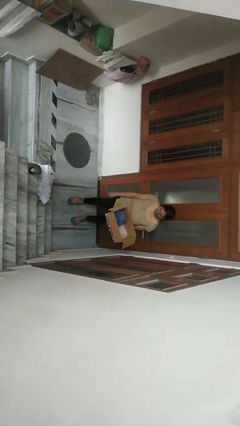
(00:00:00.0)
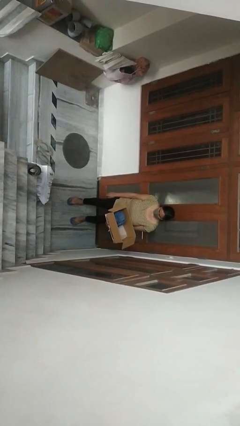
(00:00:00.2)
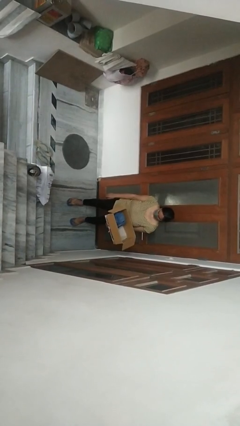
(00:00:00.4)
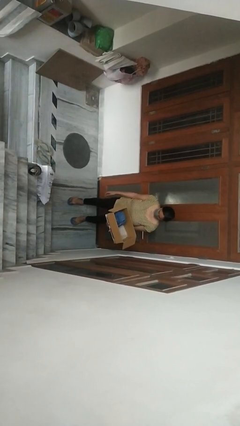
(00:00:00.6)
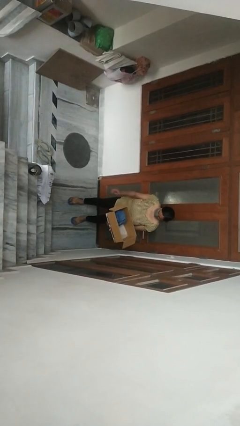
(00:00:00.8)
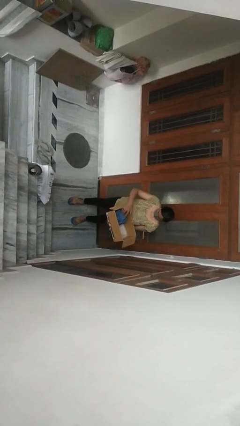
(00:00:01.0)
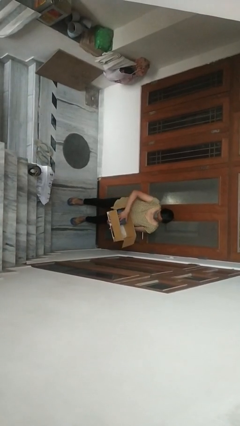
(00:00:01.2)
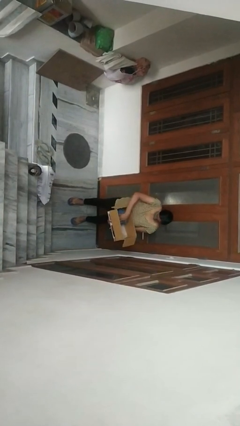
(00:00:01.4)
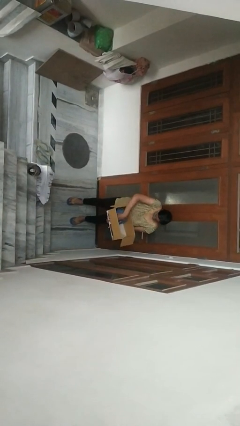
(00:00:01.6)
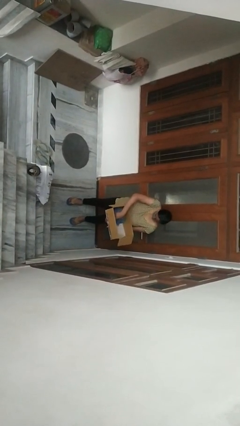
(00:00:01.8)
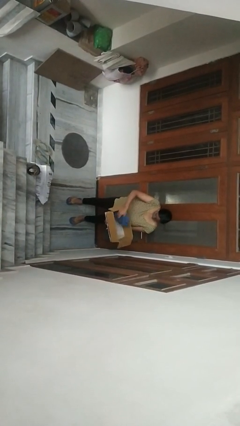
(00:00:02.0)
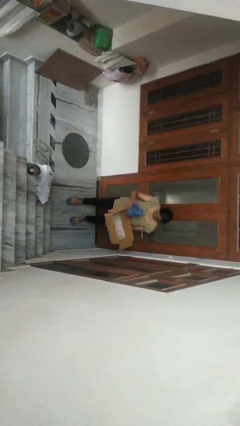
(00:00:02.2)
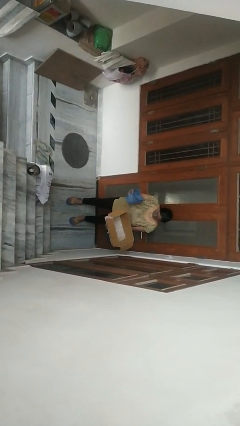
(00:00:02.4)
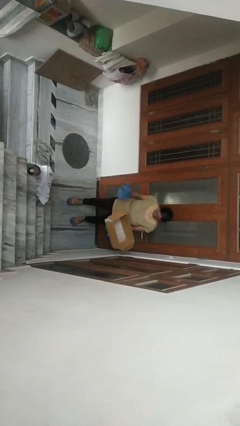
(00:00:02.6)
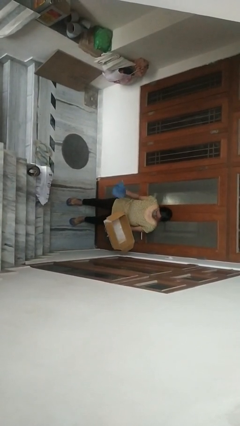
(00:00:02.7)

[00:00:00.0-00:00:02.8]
person takes object from box

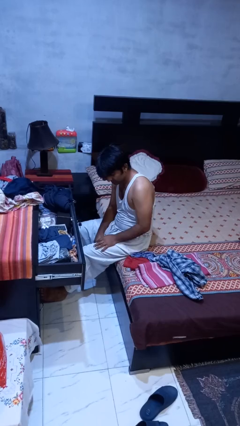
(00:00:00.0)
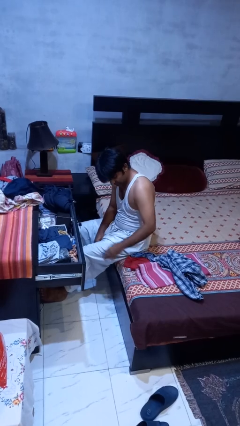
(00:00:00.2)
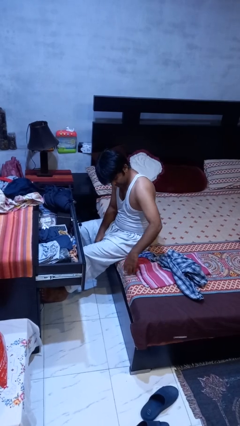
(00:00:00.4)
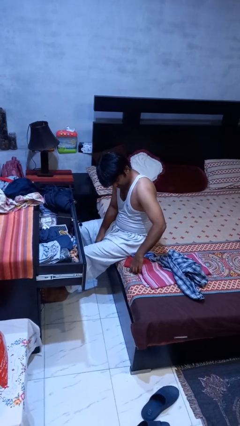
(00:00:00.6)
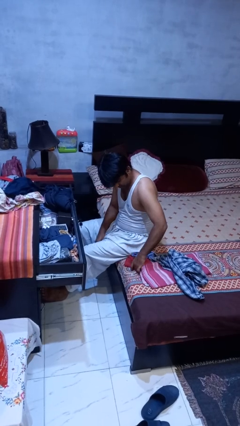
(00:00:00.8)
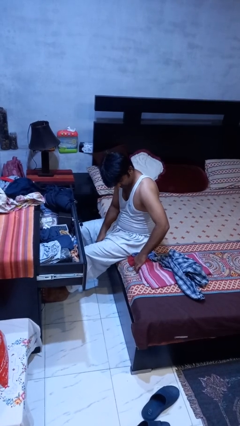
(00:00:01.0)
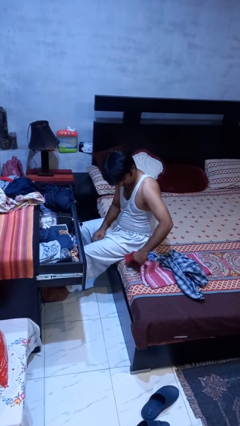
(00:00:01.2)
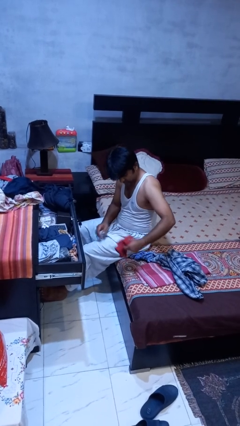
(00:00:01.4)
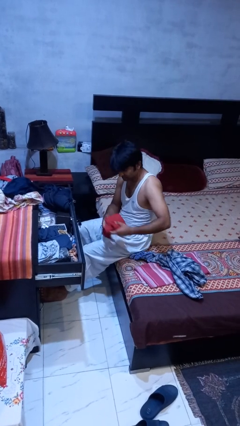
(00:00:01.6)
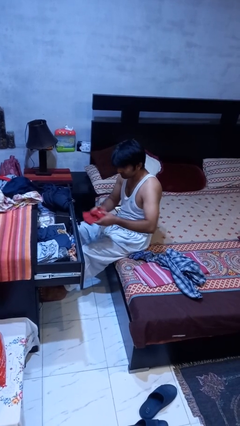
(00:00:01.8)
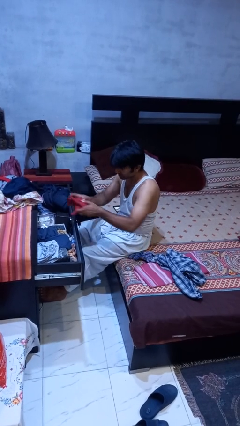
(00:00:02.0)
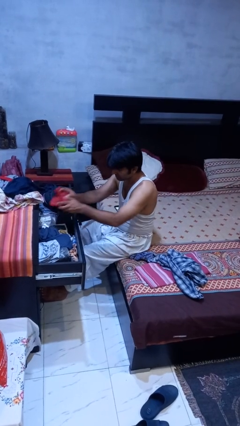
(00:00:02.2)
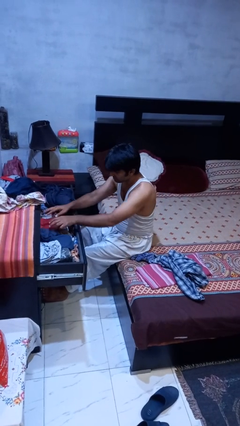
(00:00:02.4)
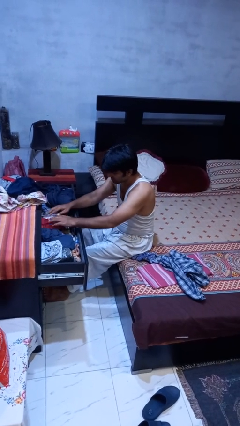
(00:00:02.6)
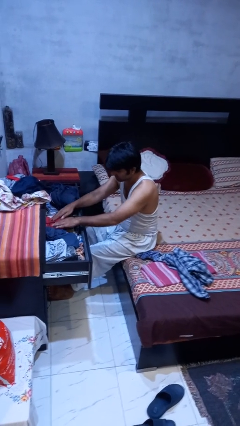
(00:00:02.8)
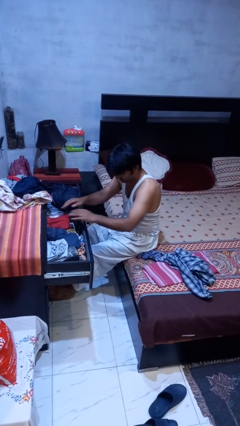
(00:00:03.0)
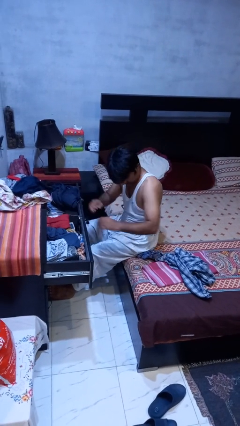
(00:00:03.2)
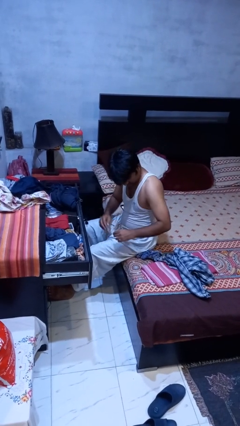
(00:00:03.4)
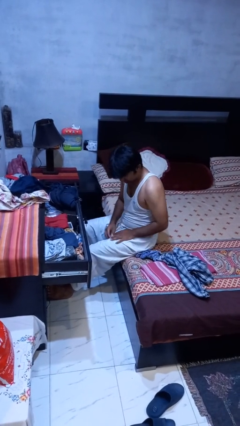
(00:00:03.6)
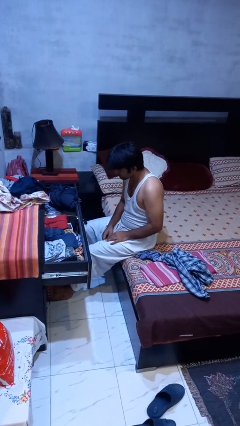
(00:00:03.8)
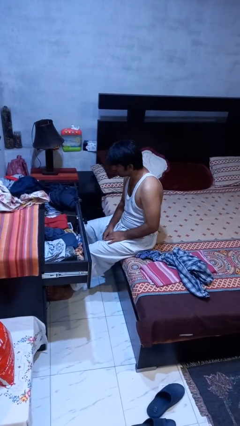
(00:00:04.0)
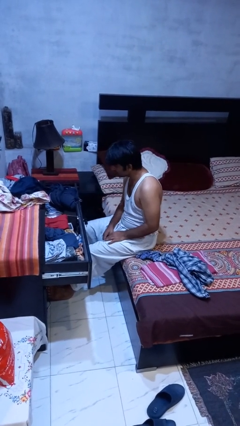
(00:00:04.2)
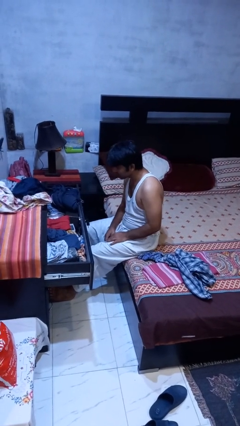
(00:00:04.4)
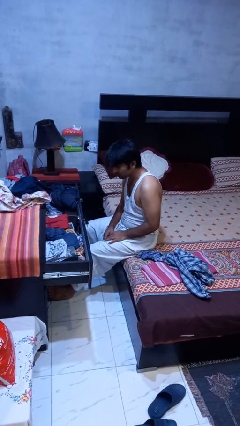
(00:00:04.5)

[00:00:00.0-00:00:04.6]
person puts clothes into dresser

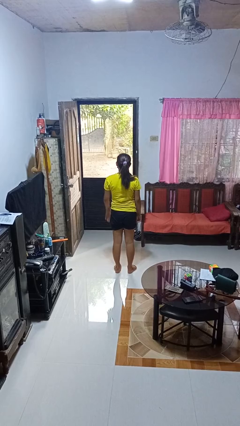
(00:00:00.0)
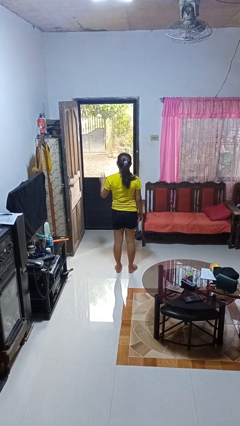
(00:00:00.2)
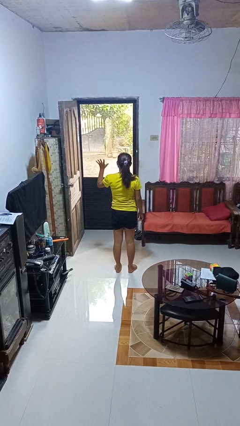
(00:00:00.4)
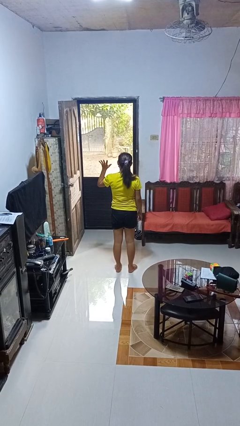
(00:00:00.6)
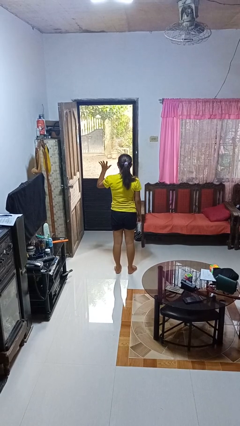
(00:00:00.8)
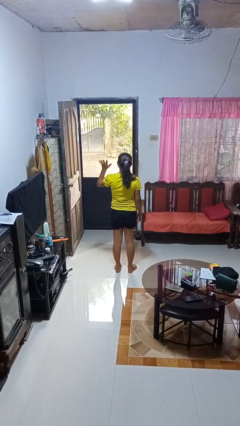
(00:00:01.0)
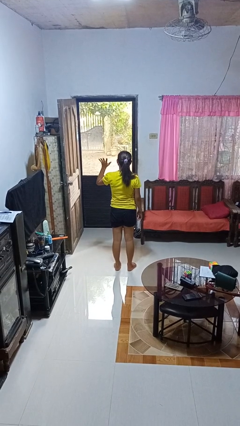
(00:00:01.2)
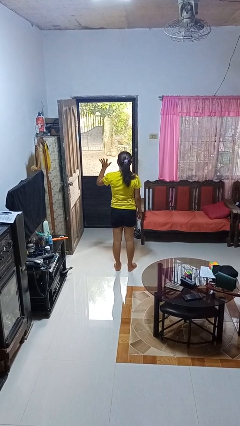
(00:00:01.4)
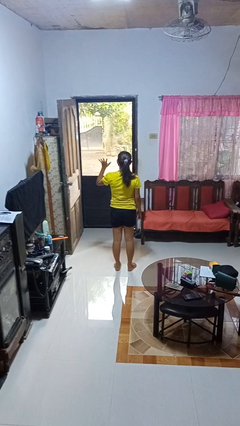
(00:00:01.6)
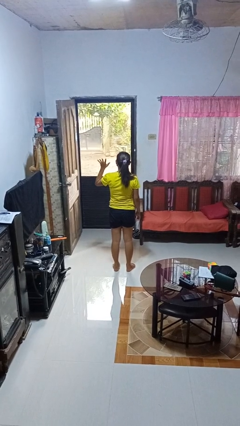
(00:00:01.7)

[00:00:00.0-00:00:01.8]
person gestures number five

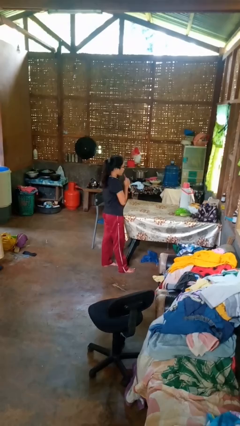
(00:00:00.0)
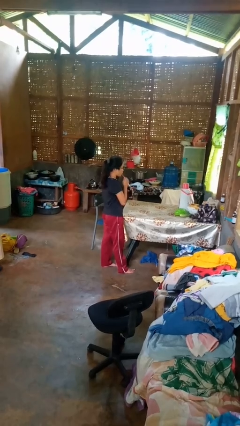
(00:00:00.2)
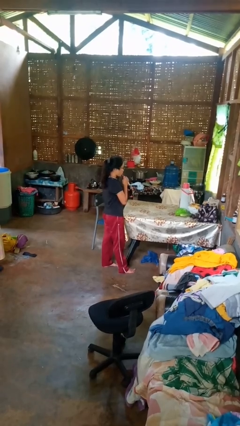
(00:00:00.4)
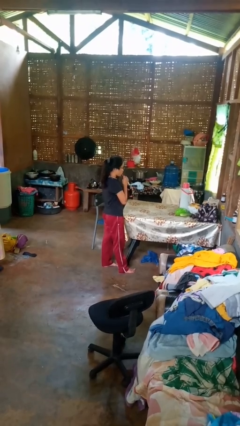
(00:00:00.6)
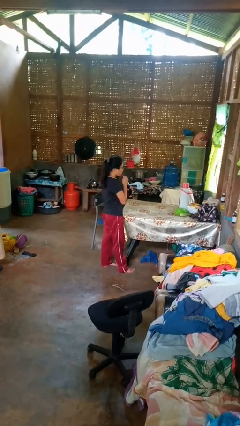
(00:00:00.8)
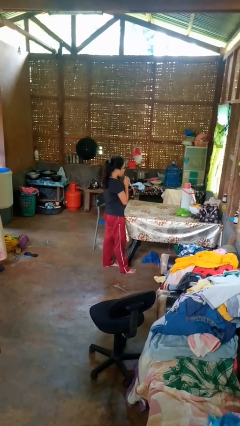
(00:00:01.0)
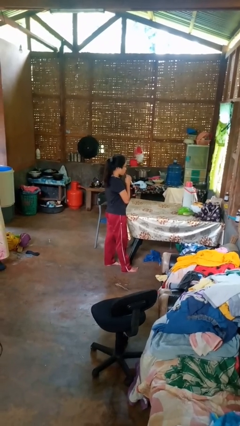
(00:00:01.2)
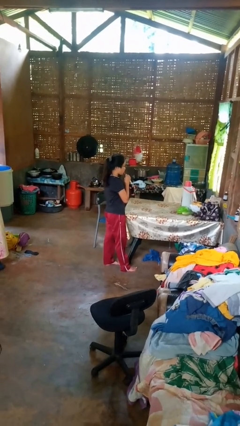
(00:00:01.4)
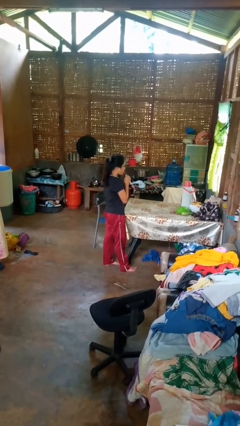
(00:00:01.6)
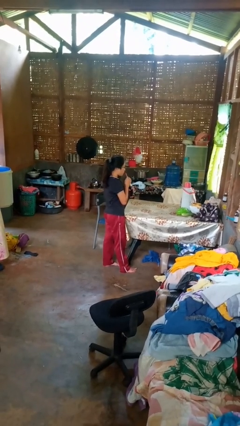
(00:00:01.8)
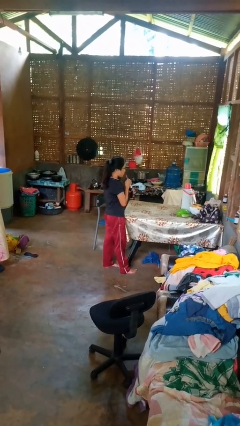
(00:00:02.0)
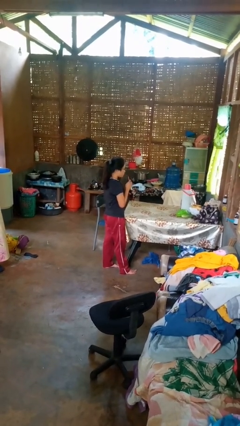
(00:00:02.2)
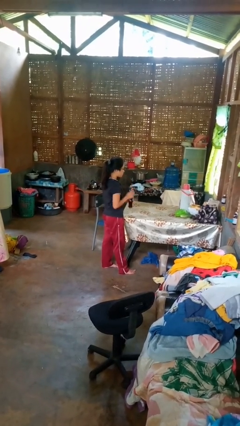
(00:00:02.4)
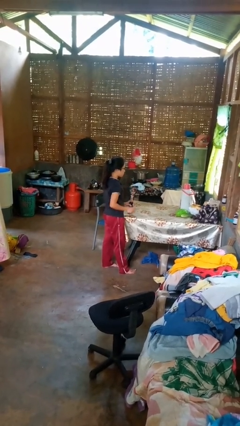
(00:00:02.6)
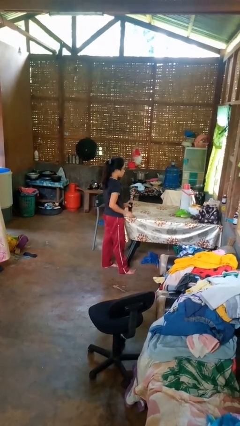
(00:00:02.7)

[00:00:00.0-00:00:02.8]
person drinks from straw

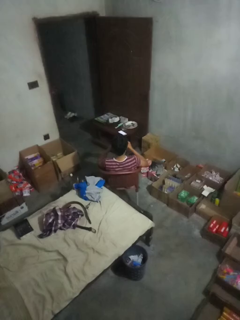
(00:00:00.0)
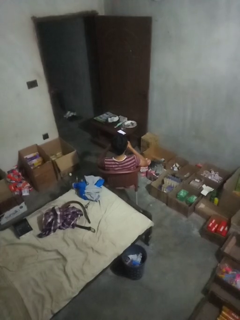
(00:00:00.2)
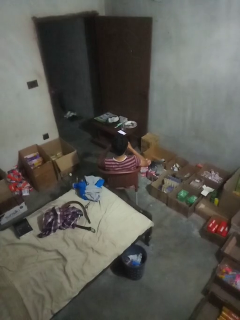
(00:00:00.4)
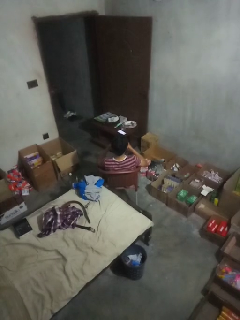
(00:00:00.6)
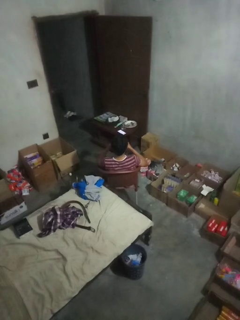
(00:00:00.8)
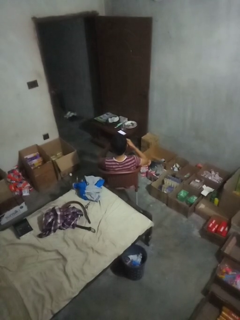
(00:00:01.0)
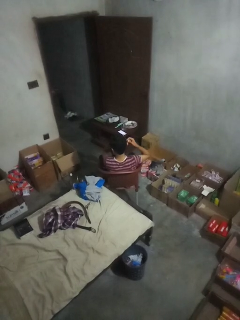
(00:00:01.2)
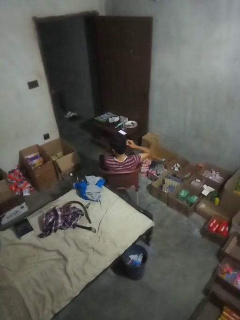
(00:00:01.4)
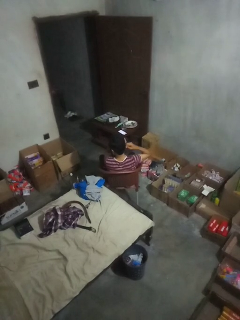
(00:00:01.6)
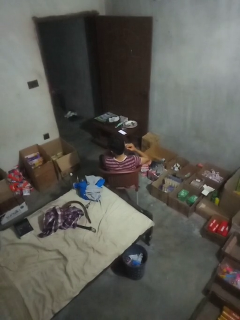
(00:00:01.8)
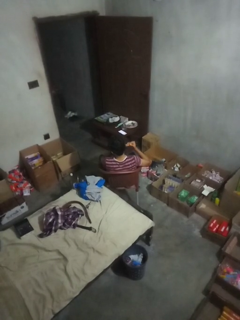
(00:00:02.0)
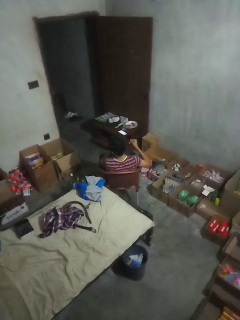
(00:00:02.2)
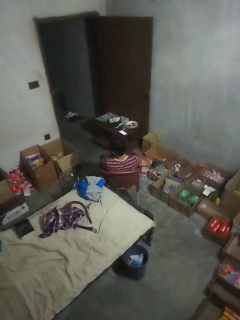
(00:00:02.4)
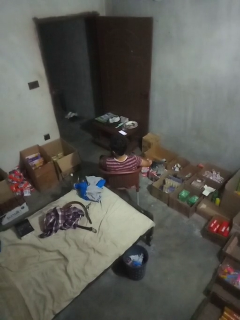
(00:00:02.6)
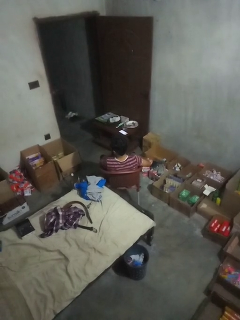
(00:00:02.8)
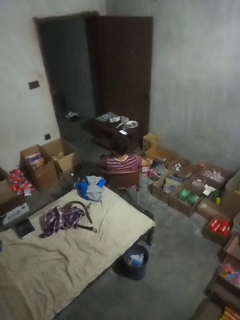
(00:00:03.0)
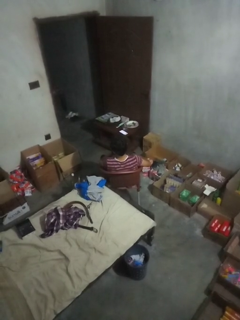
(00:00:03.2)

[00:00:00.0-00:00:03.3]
person puts on earrings

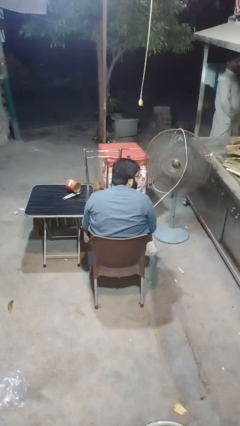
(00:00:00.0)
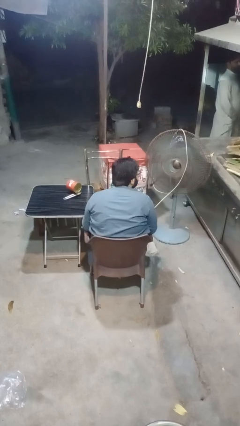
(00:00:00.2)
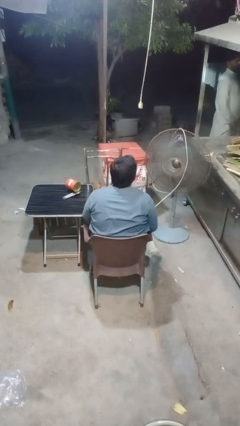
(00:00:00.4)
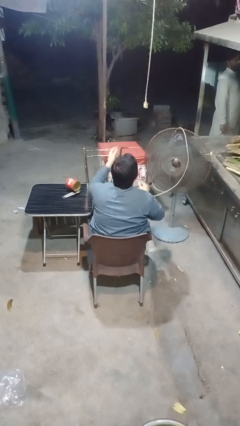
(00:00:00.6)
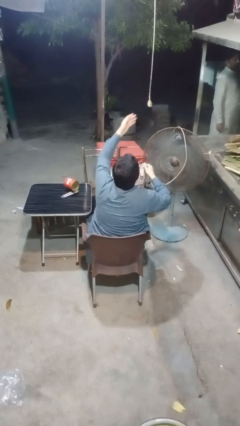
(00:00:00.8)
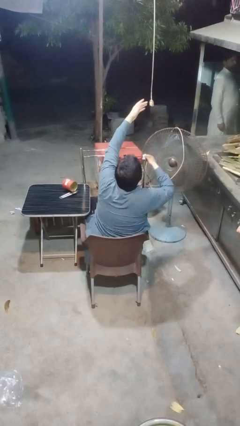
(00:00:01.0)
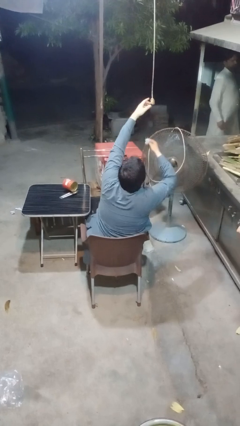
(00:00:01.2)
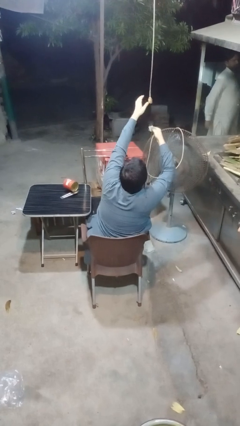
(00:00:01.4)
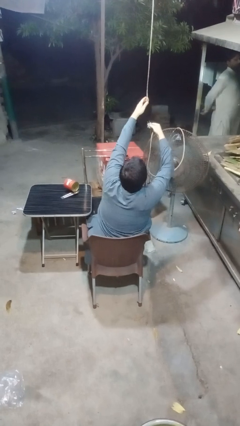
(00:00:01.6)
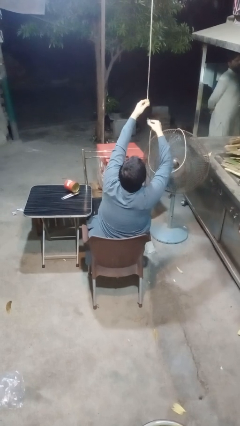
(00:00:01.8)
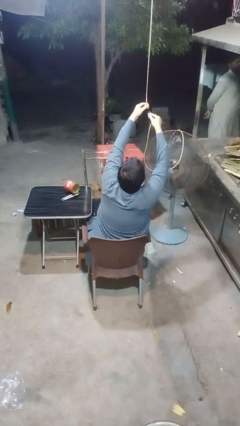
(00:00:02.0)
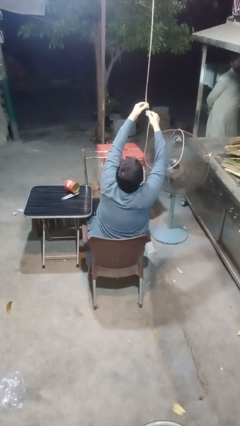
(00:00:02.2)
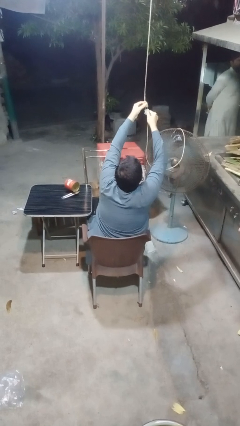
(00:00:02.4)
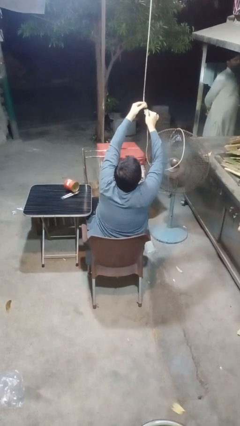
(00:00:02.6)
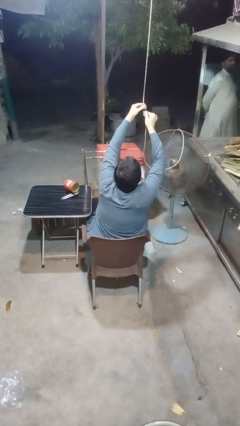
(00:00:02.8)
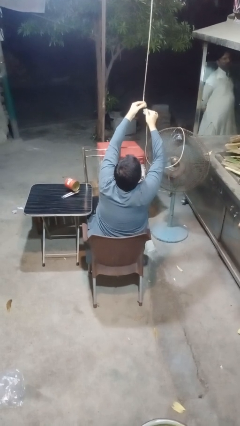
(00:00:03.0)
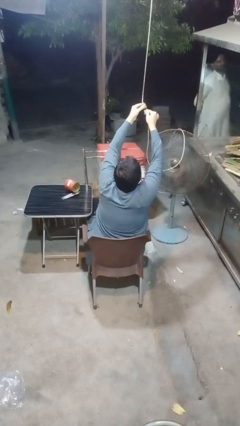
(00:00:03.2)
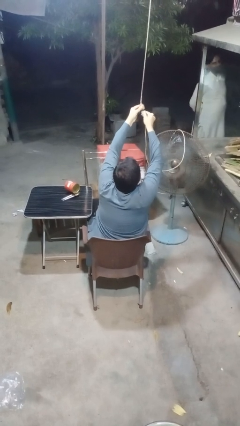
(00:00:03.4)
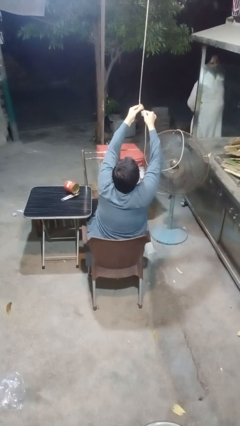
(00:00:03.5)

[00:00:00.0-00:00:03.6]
person turns on fan
